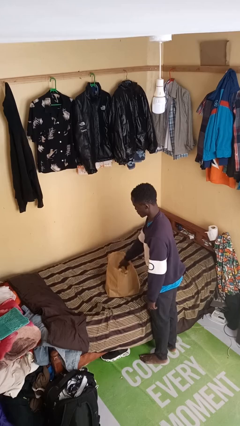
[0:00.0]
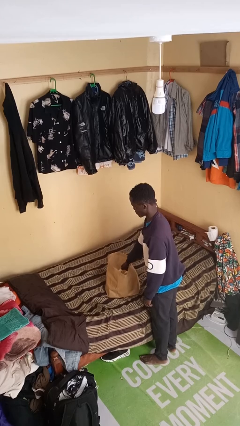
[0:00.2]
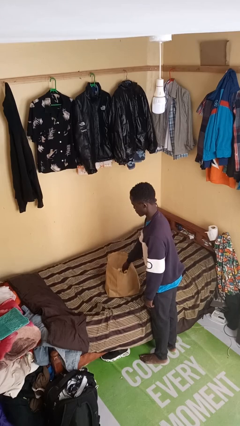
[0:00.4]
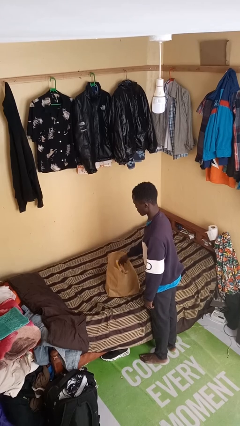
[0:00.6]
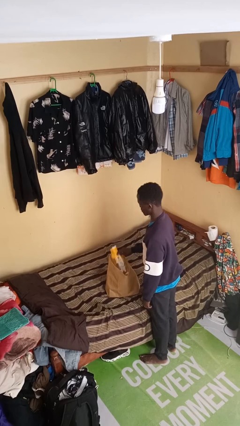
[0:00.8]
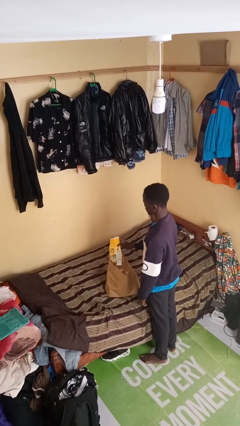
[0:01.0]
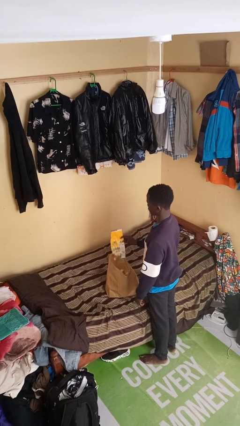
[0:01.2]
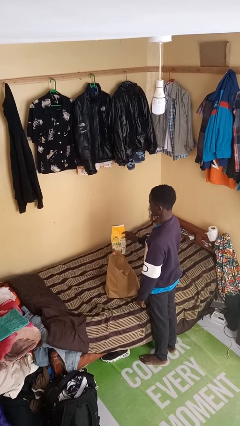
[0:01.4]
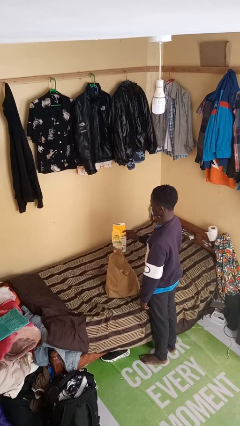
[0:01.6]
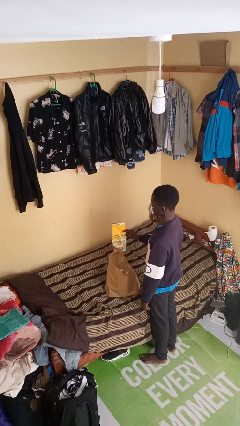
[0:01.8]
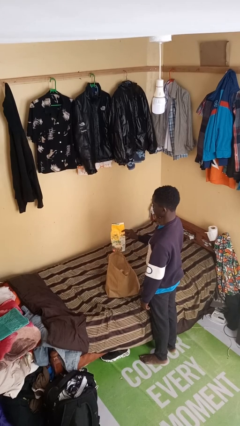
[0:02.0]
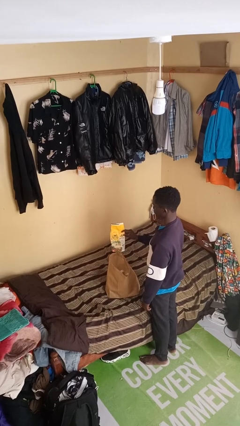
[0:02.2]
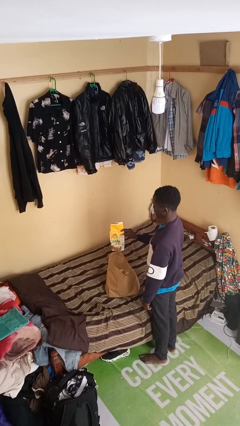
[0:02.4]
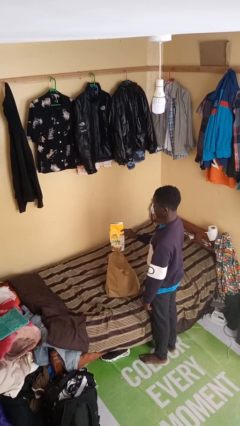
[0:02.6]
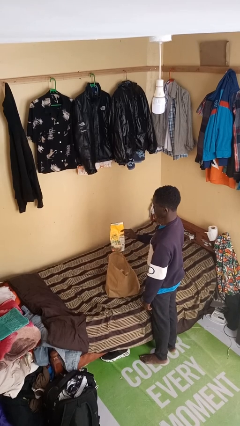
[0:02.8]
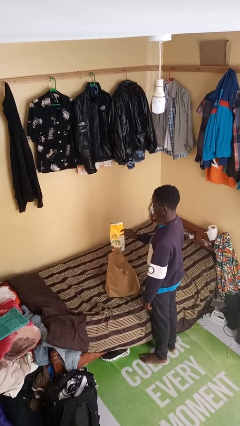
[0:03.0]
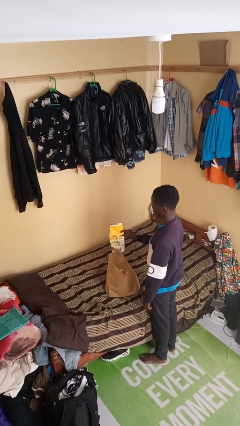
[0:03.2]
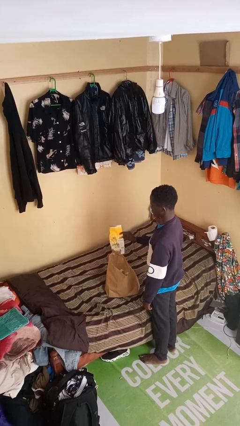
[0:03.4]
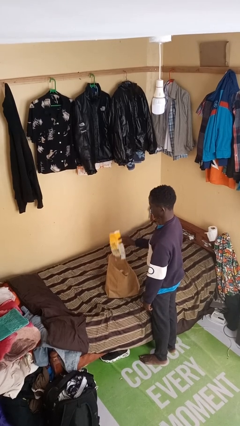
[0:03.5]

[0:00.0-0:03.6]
person takes object from bag

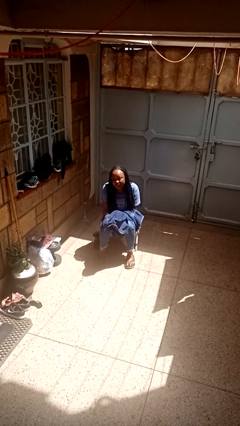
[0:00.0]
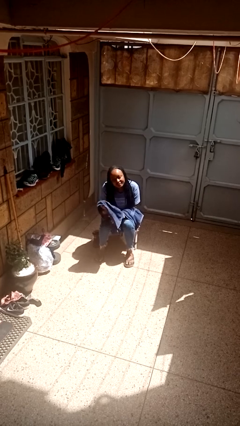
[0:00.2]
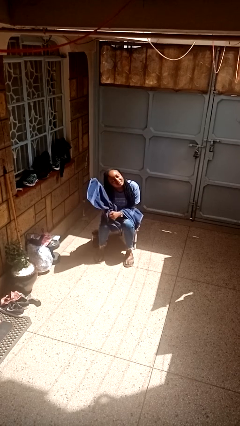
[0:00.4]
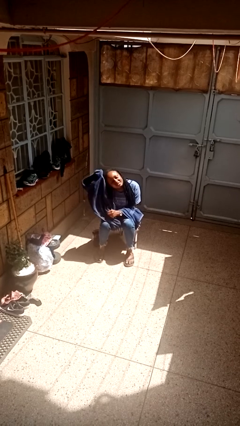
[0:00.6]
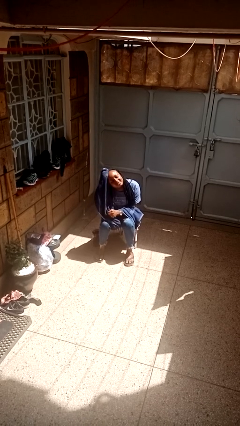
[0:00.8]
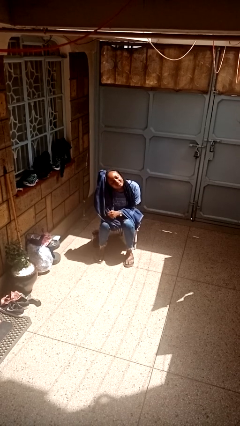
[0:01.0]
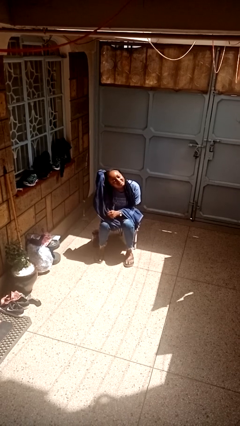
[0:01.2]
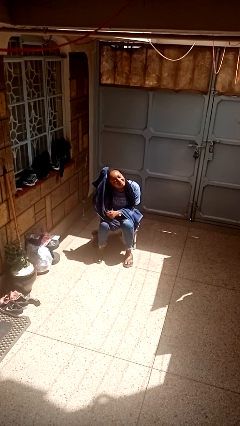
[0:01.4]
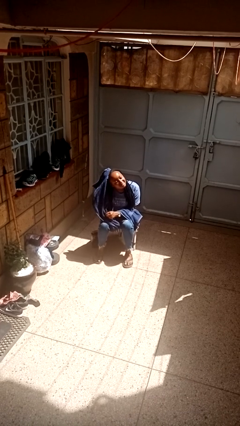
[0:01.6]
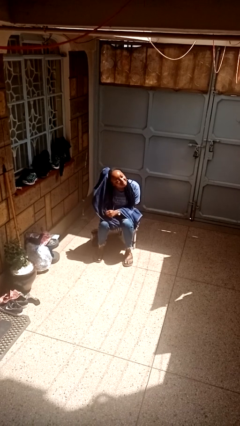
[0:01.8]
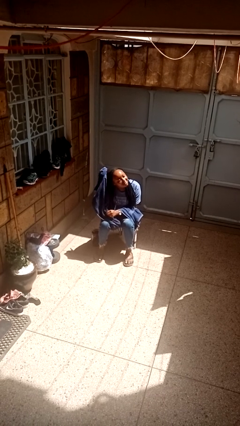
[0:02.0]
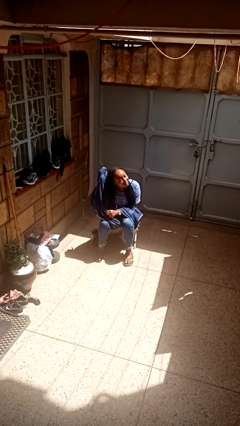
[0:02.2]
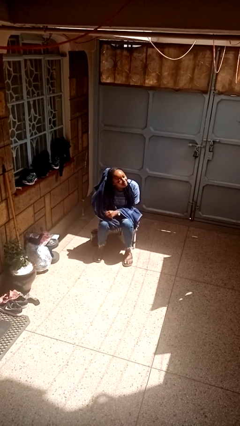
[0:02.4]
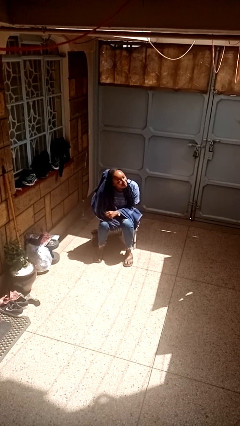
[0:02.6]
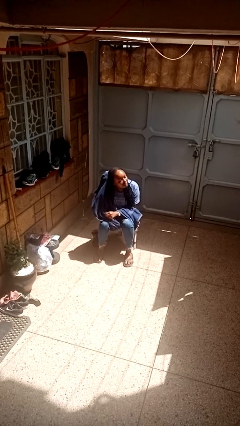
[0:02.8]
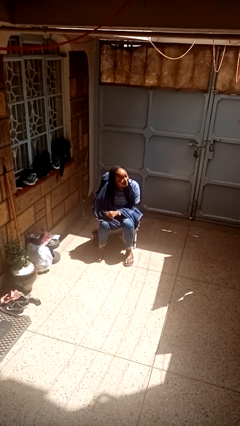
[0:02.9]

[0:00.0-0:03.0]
person dries hair with towel

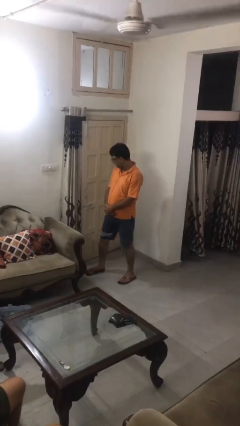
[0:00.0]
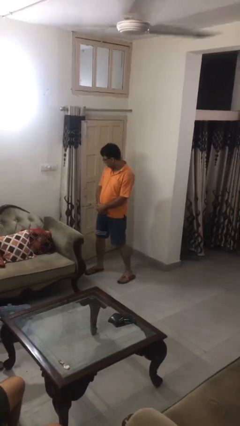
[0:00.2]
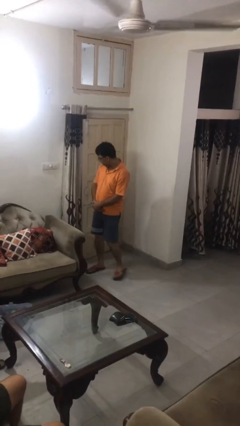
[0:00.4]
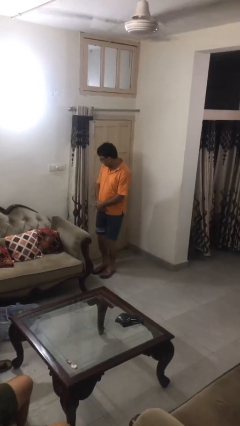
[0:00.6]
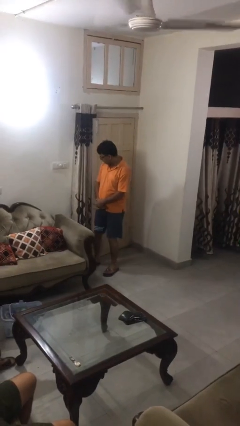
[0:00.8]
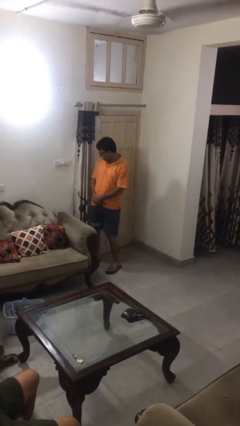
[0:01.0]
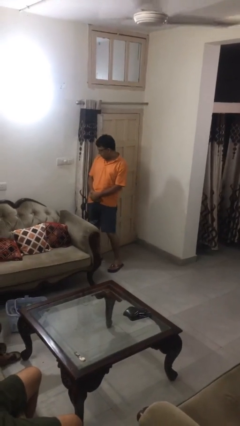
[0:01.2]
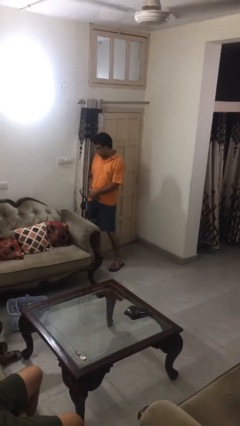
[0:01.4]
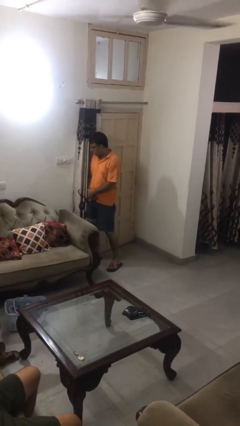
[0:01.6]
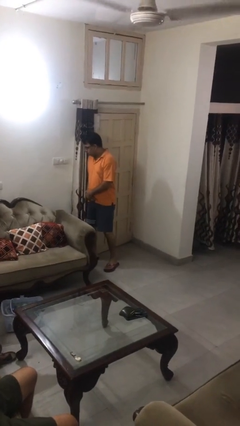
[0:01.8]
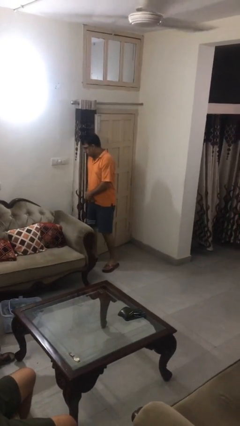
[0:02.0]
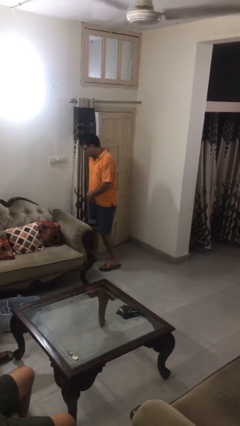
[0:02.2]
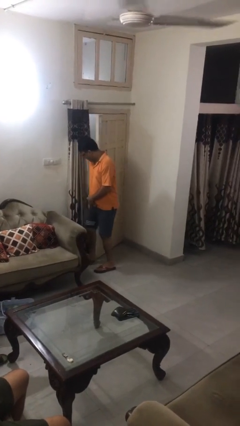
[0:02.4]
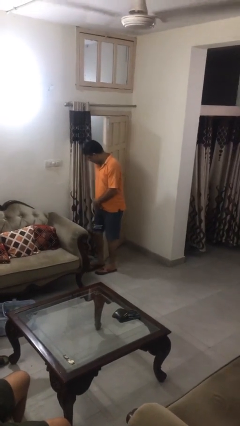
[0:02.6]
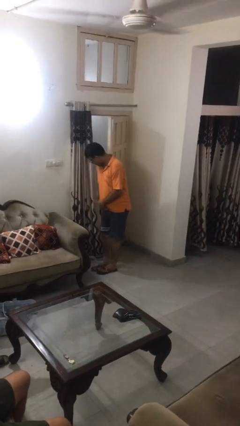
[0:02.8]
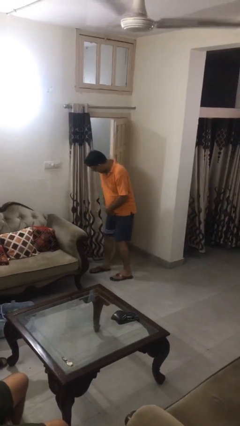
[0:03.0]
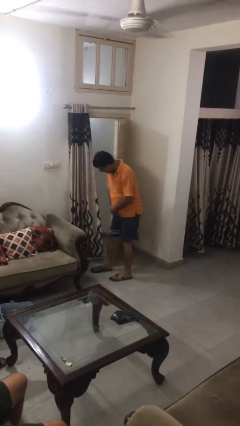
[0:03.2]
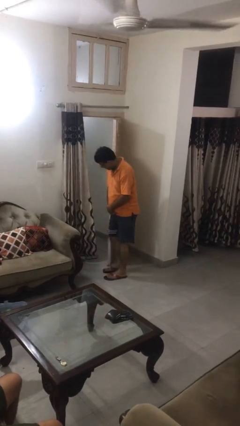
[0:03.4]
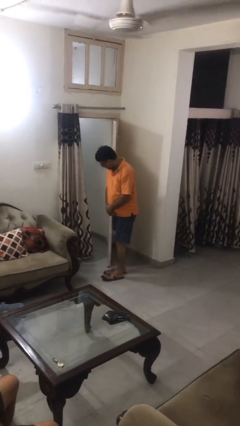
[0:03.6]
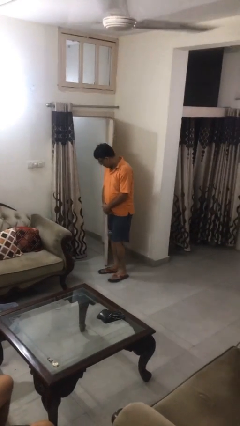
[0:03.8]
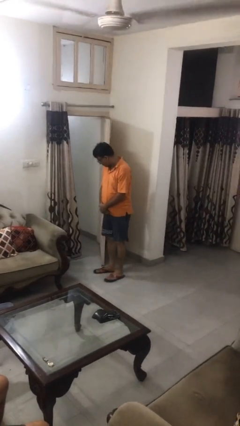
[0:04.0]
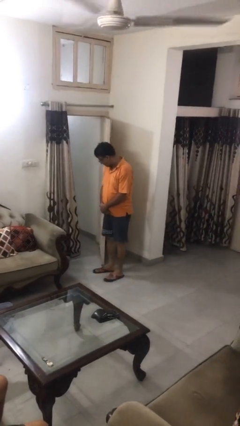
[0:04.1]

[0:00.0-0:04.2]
person opens facility door

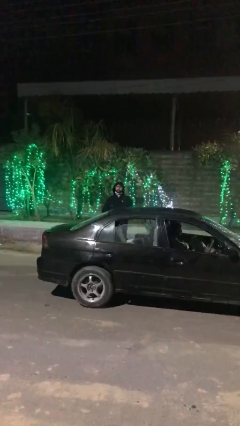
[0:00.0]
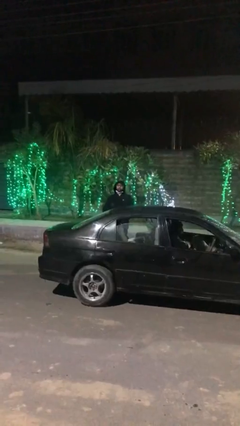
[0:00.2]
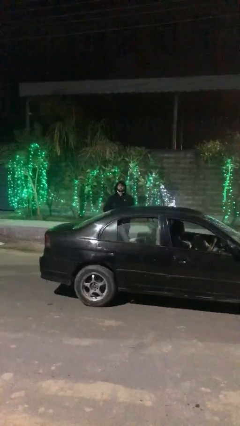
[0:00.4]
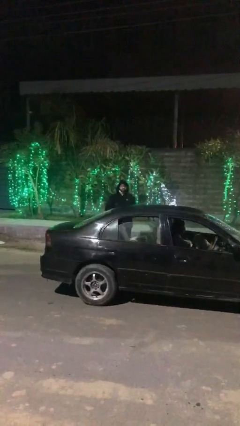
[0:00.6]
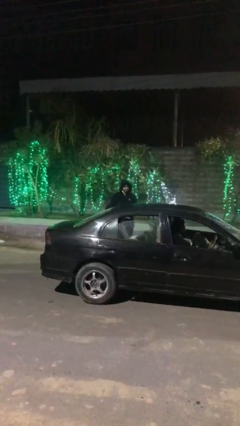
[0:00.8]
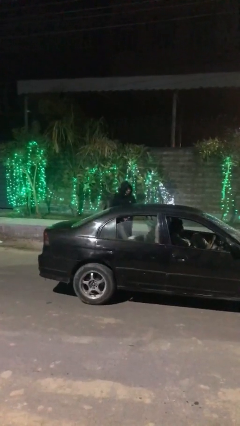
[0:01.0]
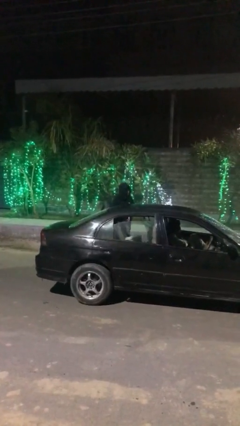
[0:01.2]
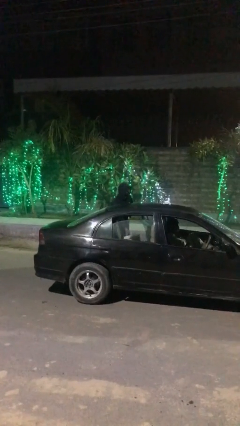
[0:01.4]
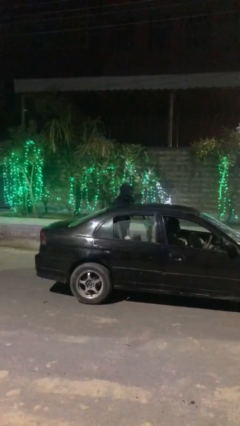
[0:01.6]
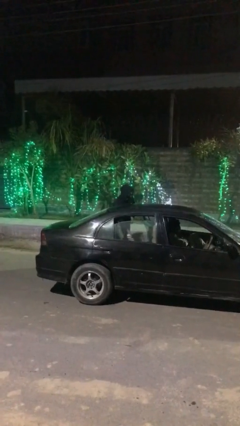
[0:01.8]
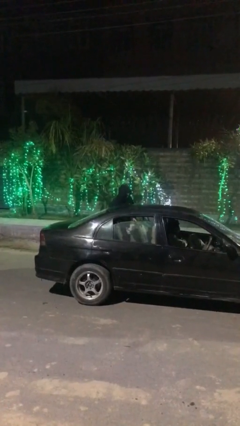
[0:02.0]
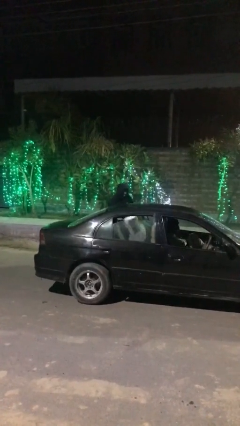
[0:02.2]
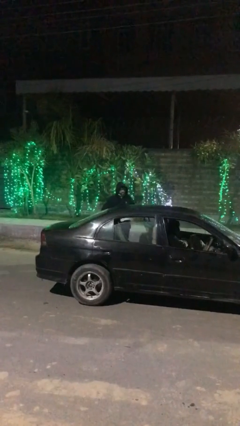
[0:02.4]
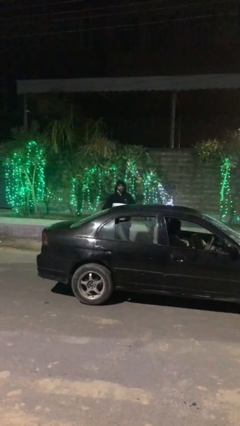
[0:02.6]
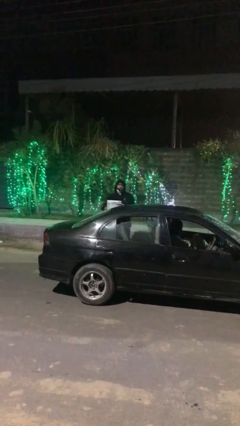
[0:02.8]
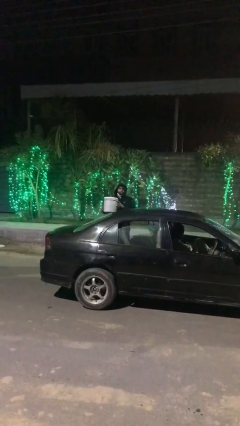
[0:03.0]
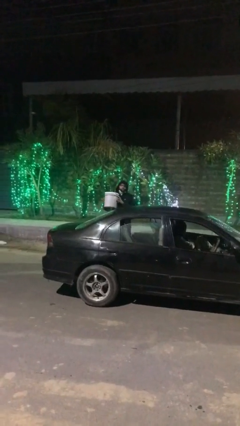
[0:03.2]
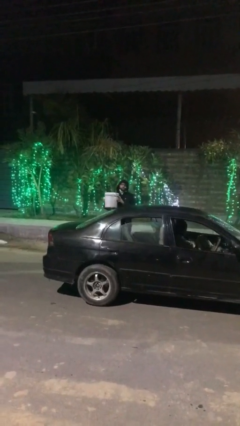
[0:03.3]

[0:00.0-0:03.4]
person unloads car

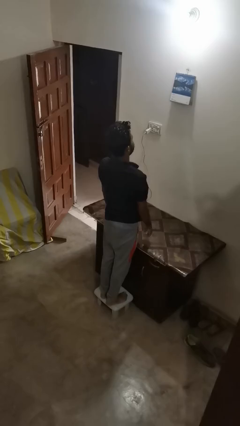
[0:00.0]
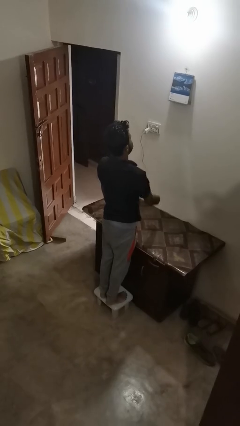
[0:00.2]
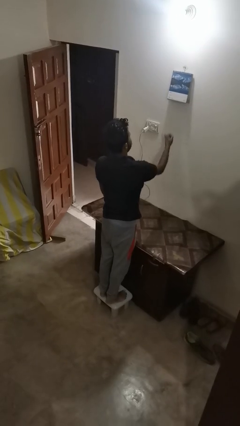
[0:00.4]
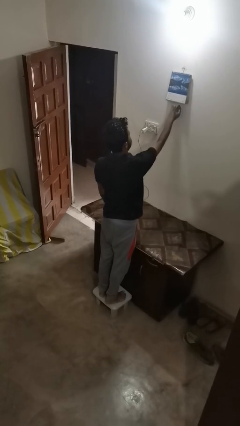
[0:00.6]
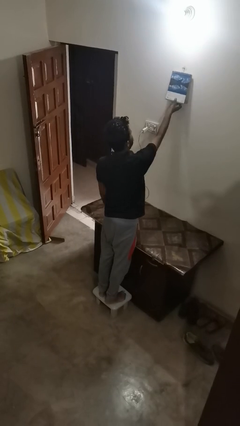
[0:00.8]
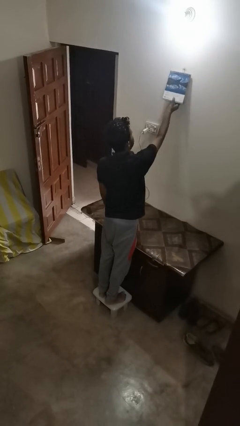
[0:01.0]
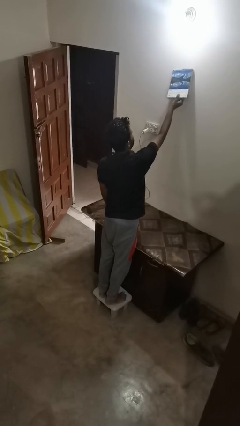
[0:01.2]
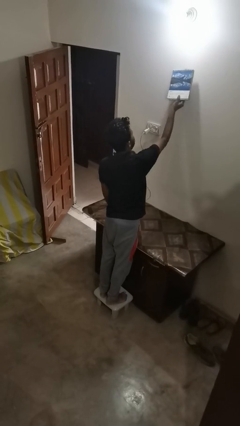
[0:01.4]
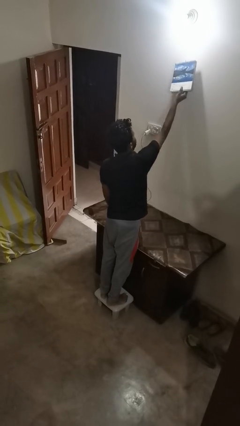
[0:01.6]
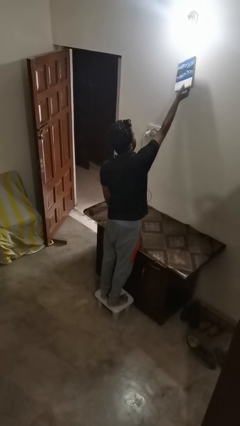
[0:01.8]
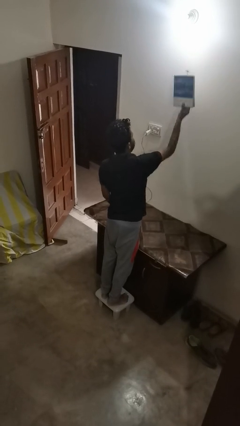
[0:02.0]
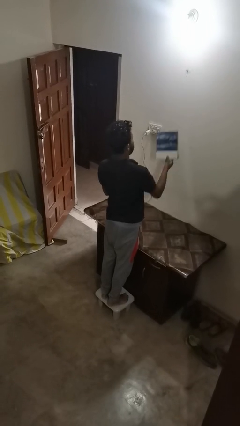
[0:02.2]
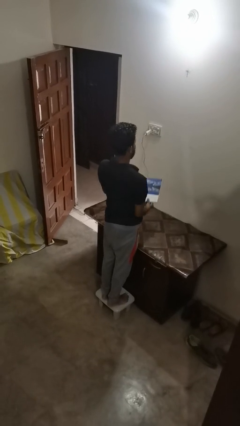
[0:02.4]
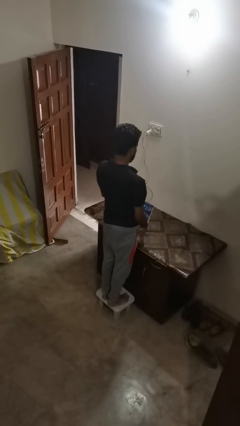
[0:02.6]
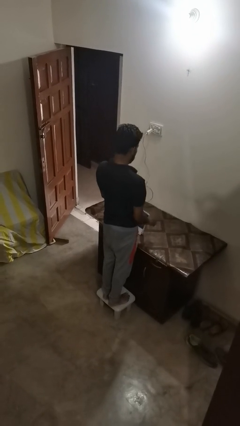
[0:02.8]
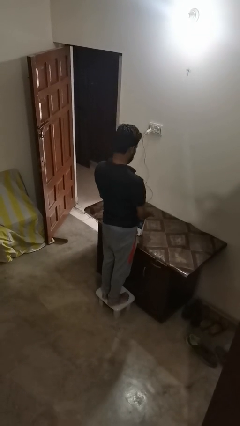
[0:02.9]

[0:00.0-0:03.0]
person takes down picture frame

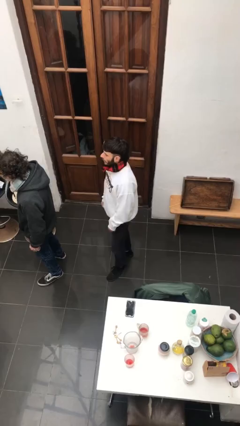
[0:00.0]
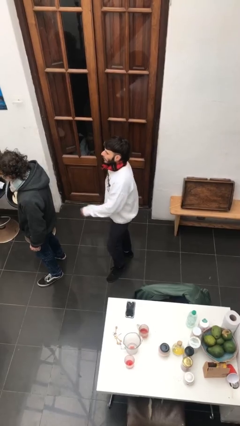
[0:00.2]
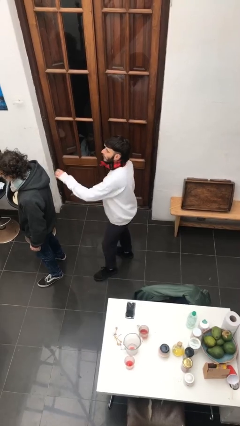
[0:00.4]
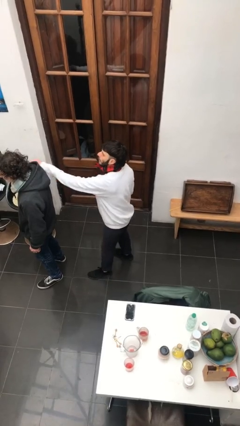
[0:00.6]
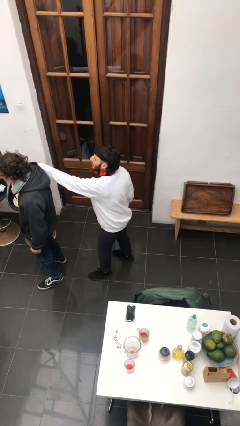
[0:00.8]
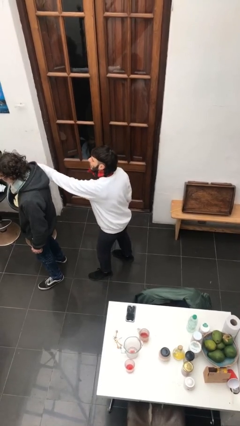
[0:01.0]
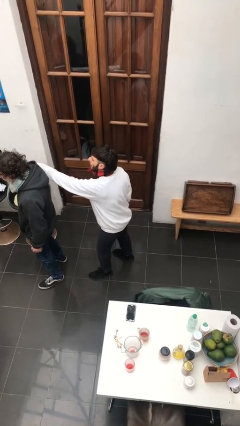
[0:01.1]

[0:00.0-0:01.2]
person grabs person by shoulder
